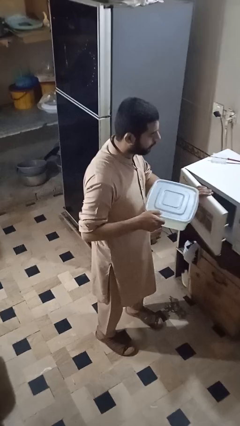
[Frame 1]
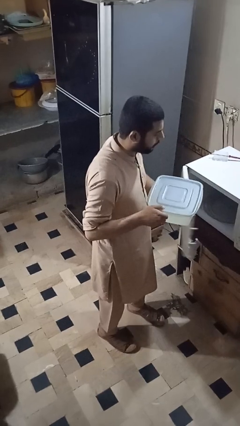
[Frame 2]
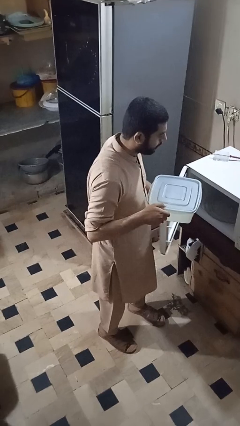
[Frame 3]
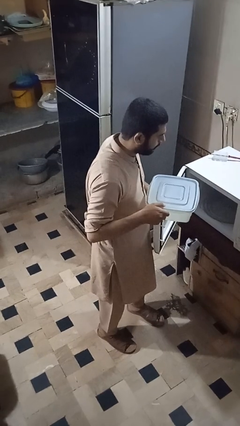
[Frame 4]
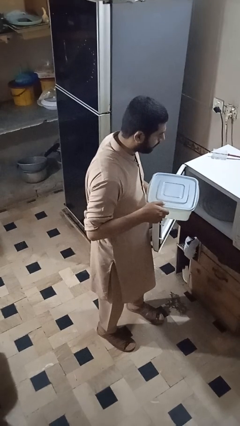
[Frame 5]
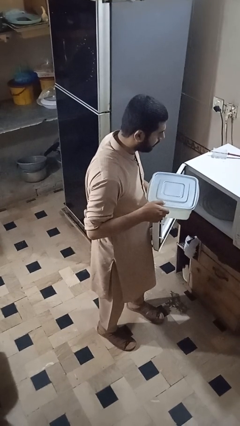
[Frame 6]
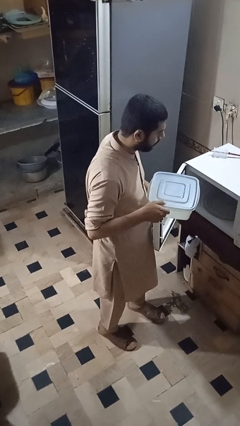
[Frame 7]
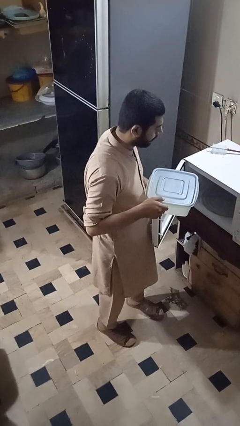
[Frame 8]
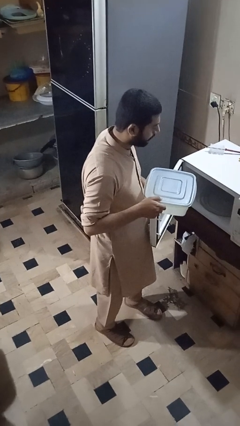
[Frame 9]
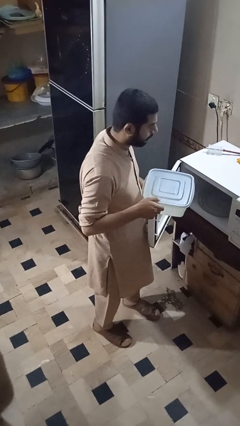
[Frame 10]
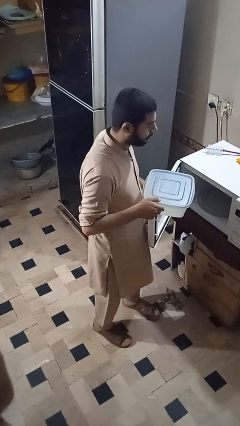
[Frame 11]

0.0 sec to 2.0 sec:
person opens microwave

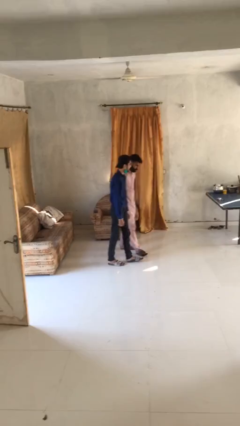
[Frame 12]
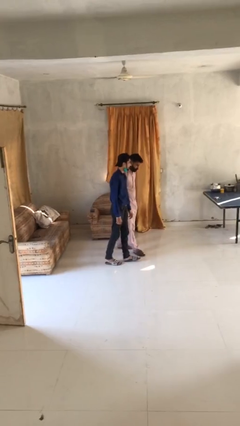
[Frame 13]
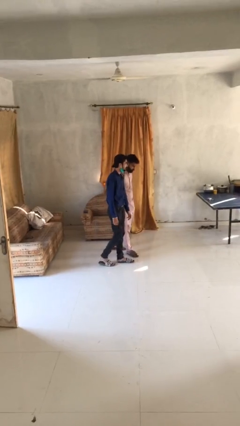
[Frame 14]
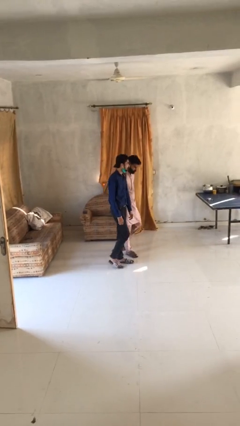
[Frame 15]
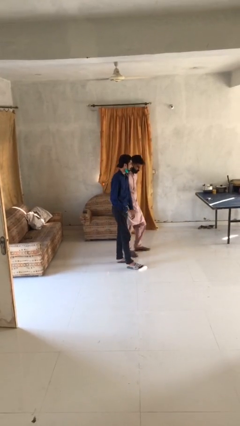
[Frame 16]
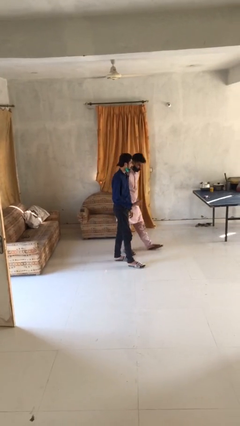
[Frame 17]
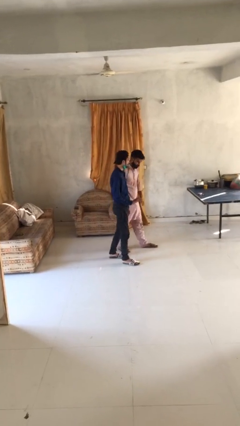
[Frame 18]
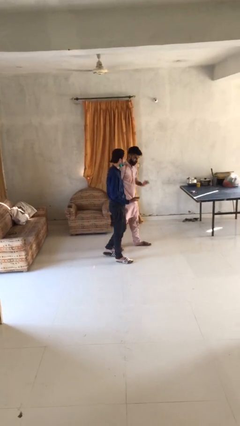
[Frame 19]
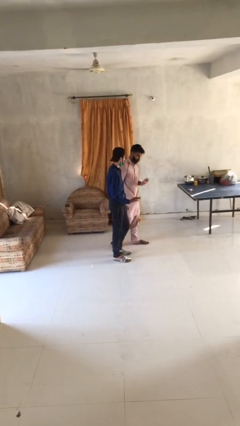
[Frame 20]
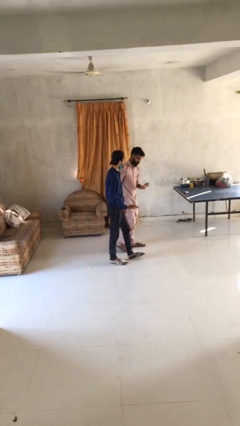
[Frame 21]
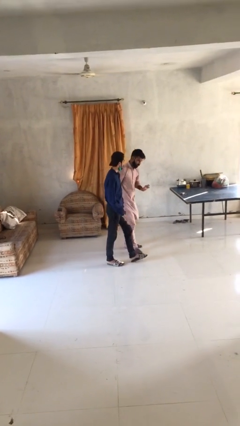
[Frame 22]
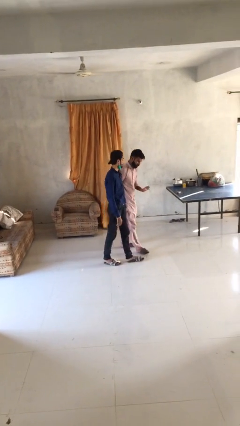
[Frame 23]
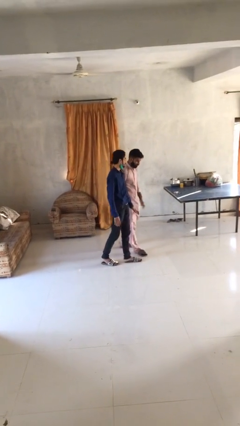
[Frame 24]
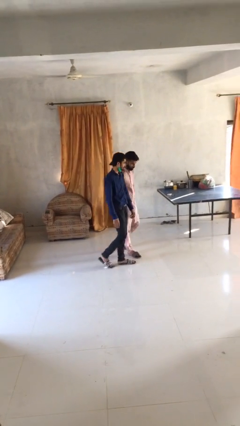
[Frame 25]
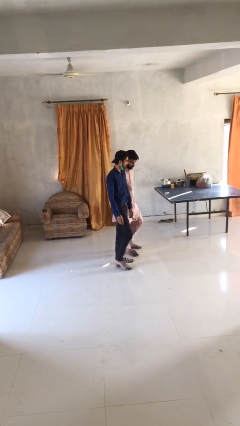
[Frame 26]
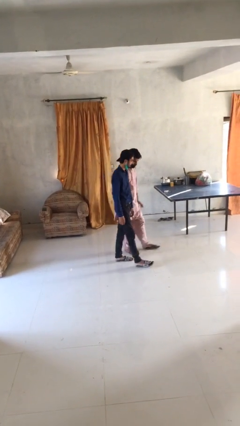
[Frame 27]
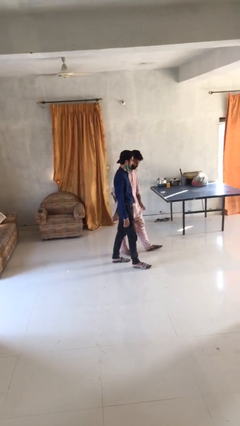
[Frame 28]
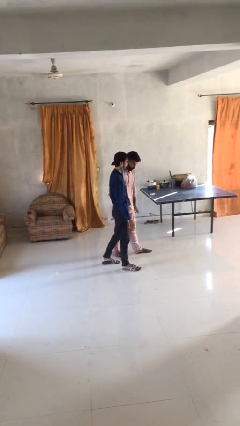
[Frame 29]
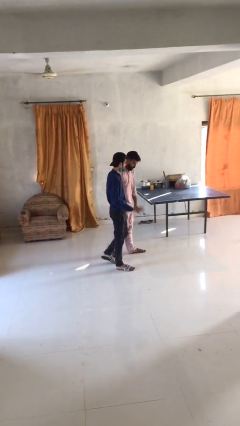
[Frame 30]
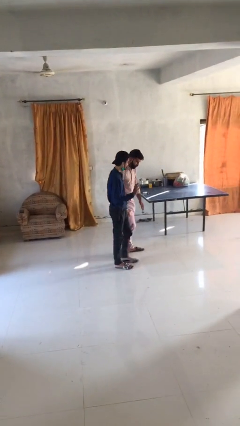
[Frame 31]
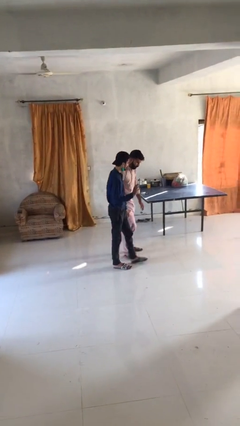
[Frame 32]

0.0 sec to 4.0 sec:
person talks to person

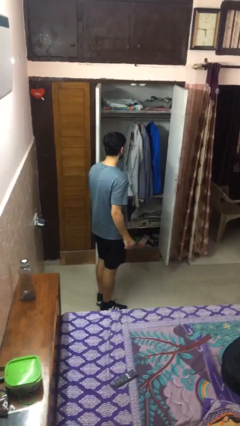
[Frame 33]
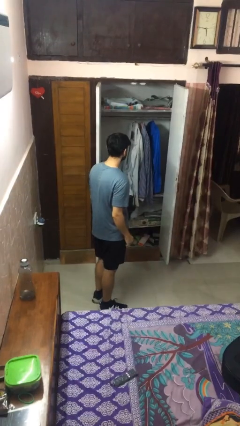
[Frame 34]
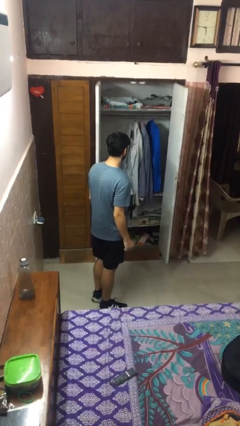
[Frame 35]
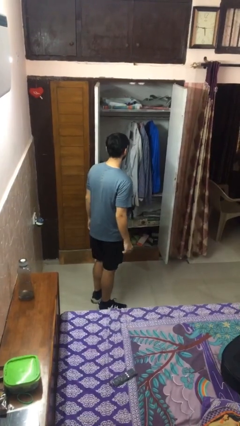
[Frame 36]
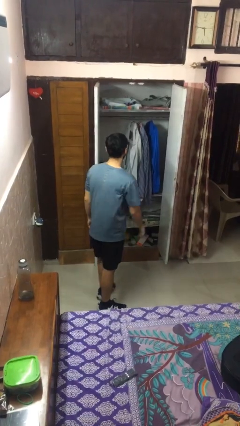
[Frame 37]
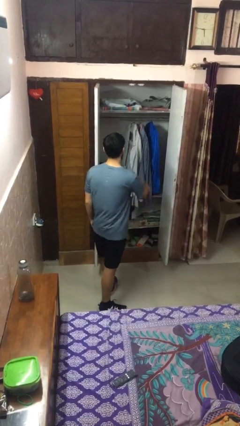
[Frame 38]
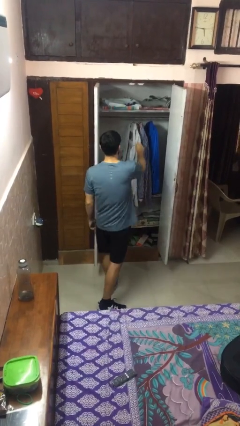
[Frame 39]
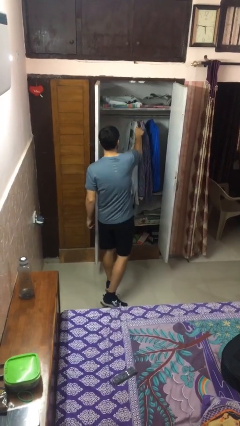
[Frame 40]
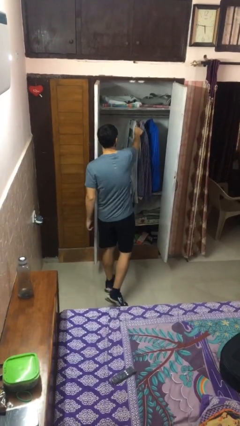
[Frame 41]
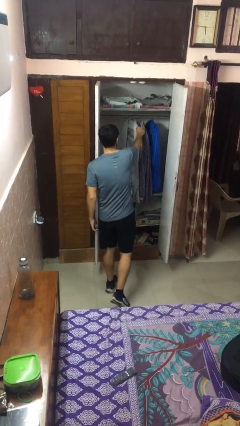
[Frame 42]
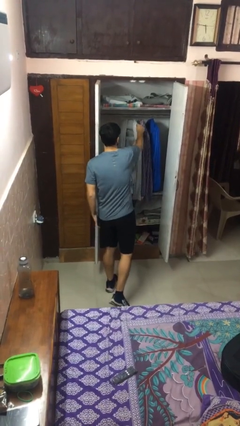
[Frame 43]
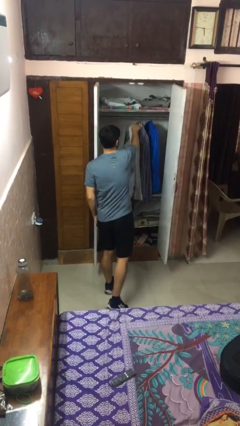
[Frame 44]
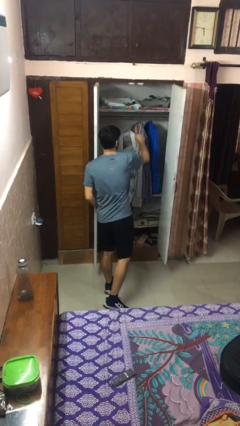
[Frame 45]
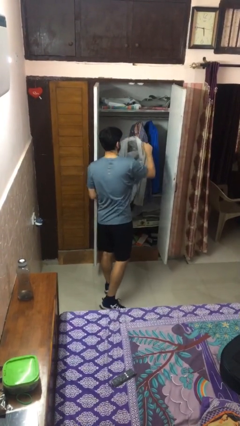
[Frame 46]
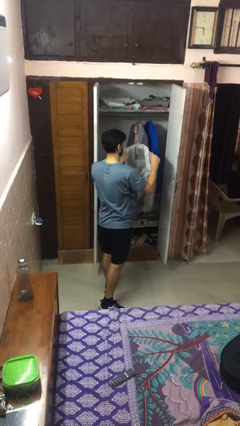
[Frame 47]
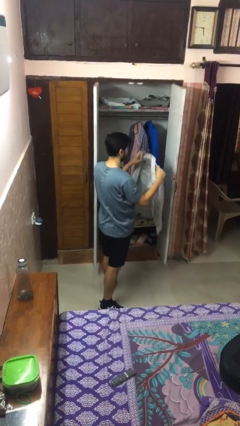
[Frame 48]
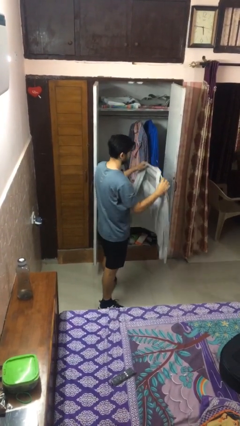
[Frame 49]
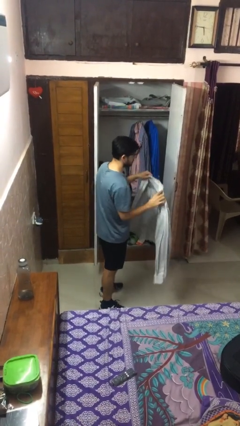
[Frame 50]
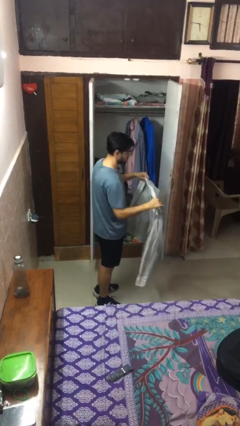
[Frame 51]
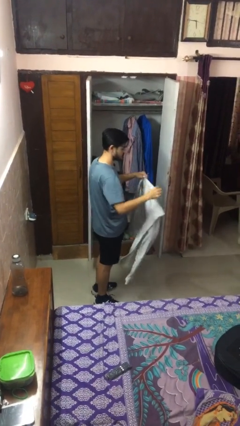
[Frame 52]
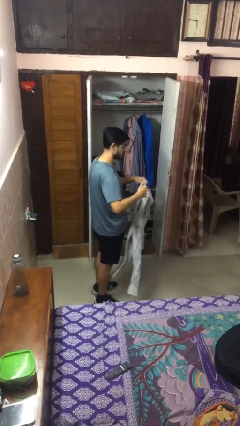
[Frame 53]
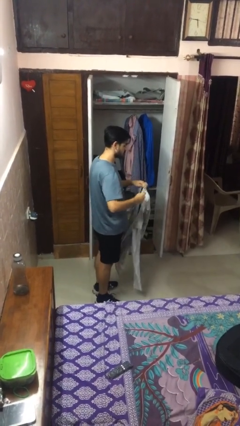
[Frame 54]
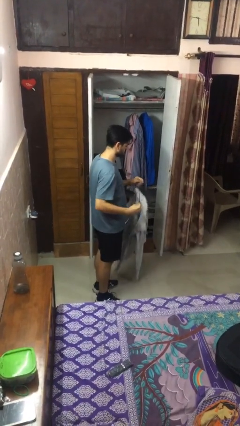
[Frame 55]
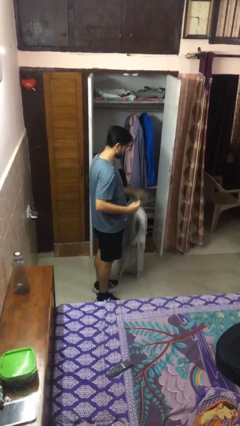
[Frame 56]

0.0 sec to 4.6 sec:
person takes clothes from closet

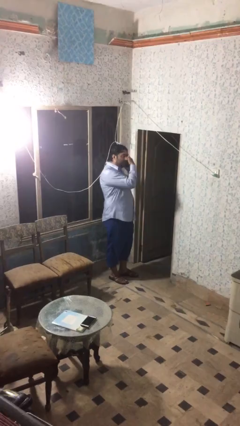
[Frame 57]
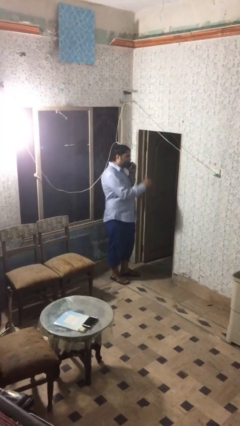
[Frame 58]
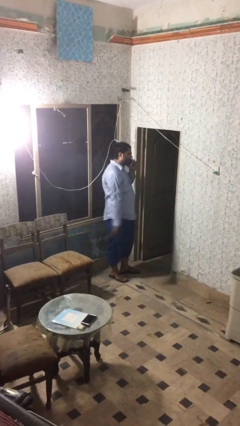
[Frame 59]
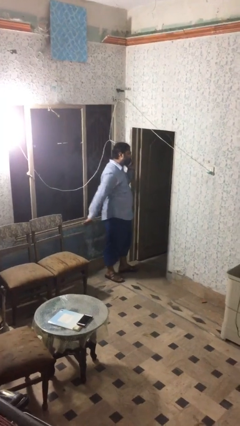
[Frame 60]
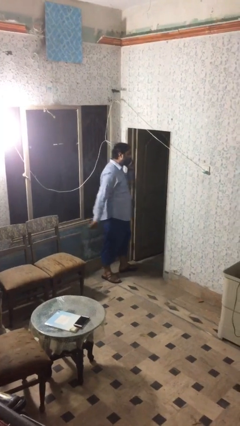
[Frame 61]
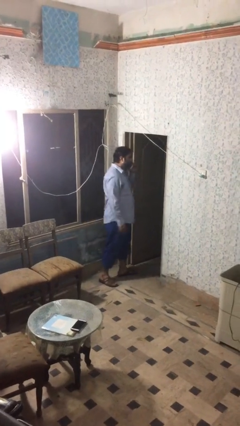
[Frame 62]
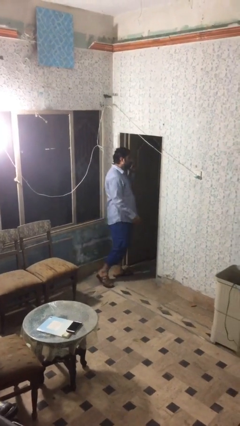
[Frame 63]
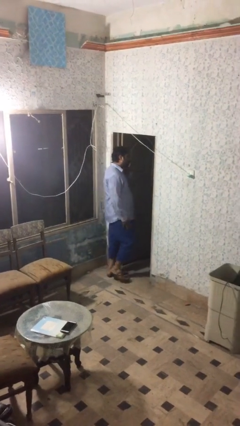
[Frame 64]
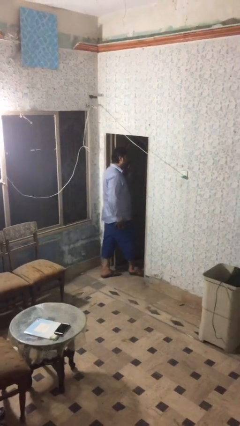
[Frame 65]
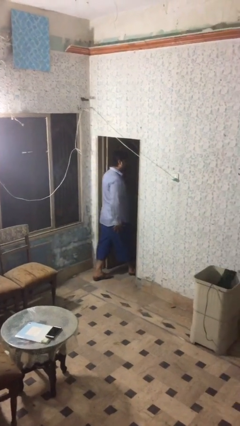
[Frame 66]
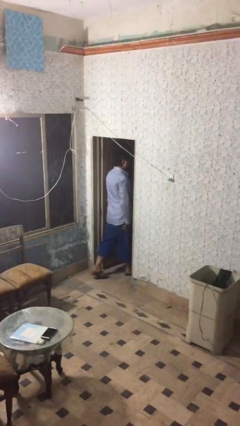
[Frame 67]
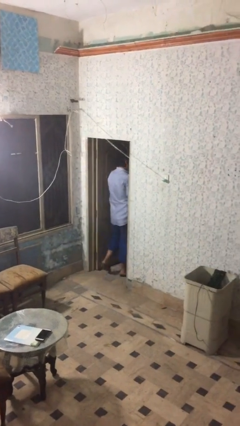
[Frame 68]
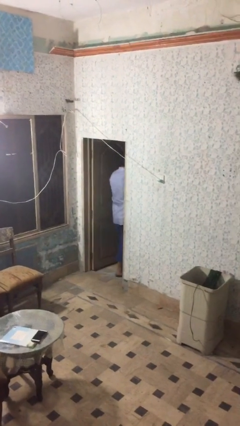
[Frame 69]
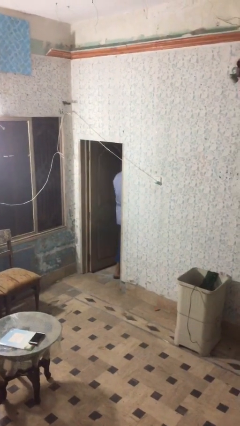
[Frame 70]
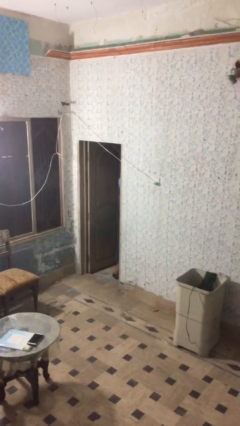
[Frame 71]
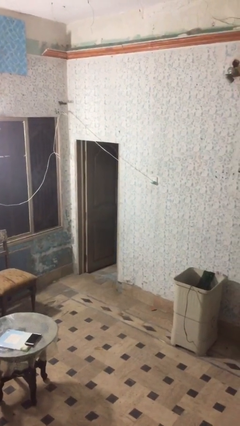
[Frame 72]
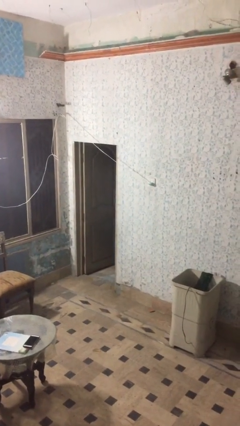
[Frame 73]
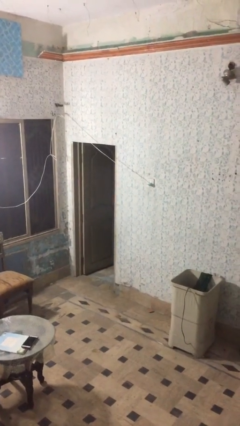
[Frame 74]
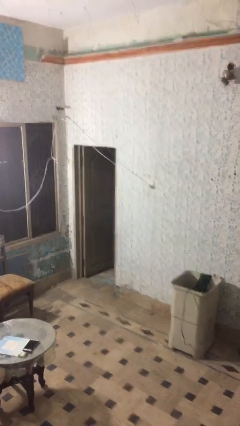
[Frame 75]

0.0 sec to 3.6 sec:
person exits scene through structure

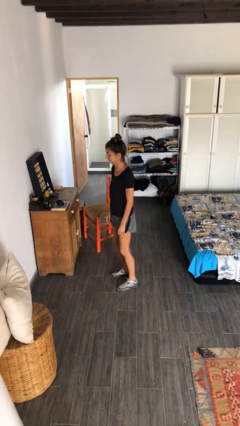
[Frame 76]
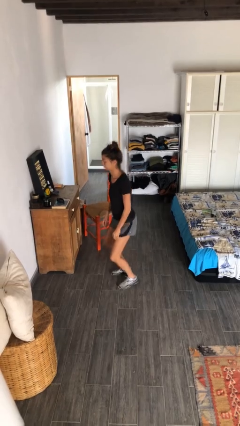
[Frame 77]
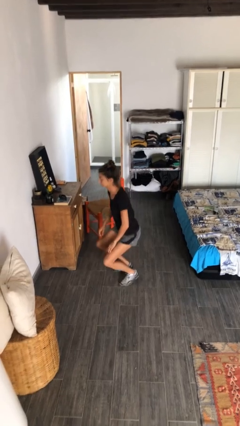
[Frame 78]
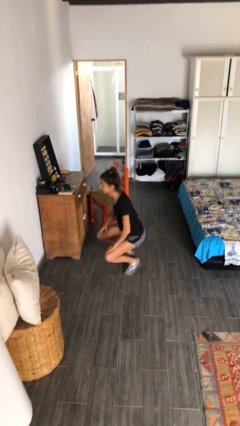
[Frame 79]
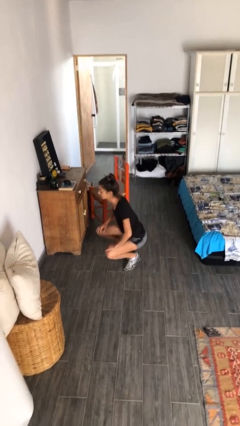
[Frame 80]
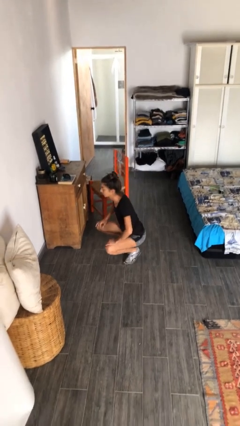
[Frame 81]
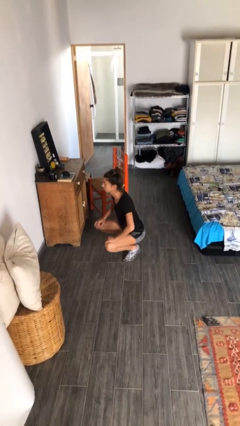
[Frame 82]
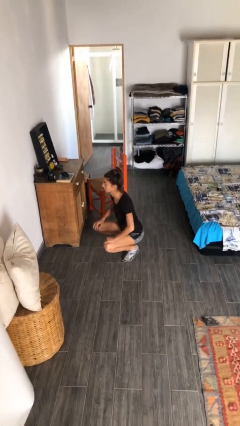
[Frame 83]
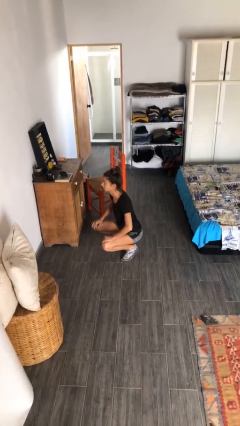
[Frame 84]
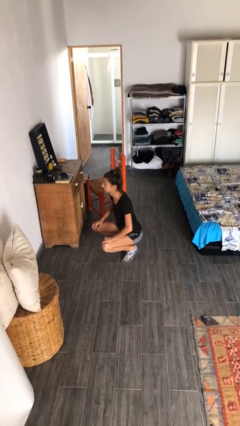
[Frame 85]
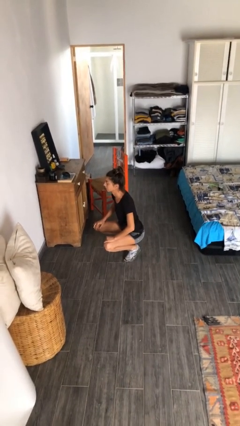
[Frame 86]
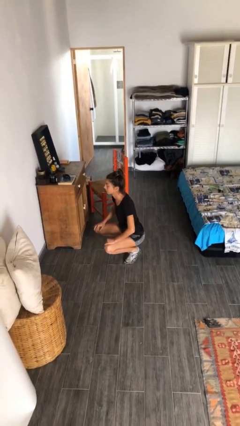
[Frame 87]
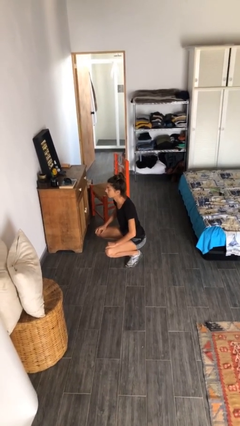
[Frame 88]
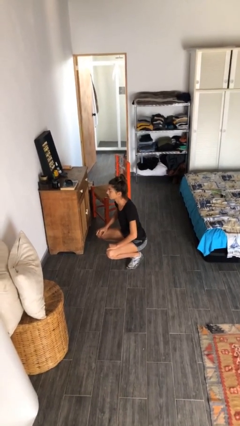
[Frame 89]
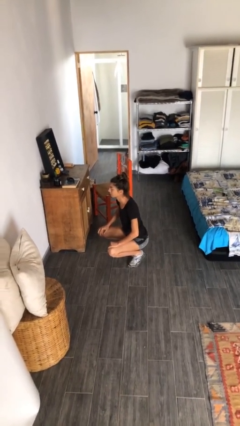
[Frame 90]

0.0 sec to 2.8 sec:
person squats

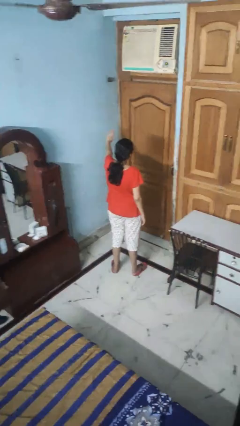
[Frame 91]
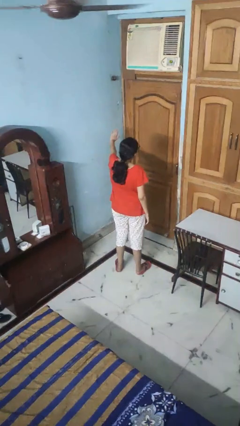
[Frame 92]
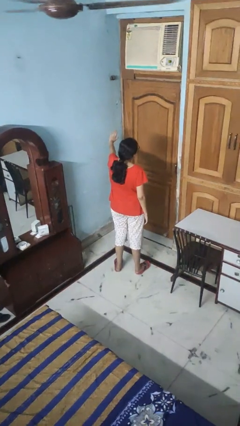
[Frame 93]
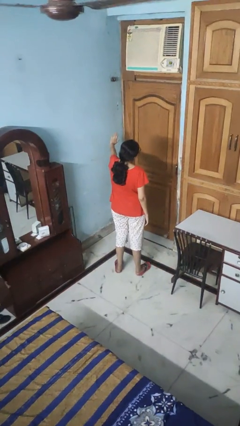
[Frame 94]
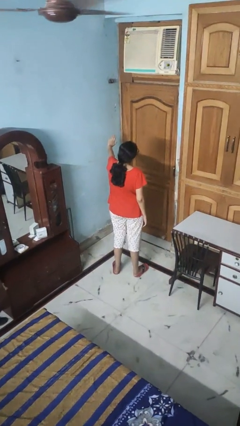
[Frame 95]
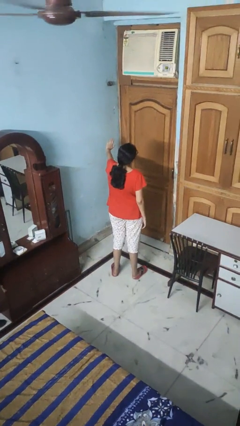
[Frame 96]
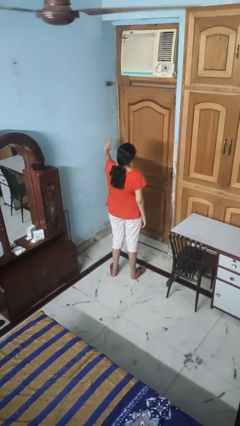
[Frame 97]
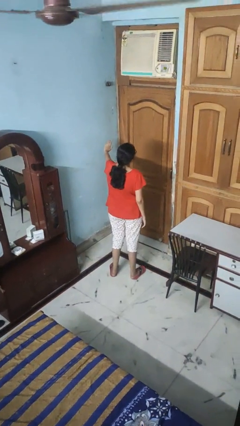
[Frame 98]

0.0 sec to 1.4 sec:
person gestures stop
